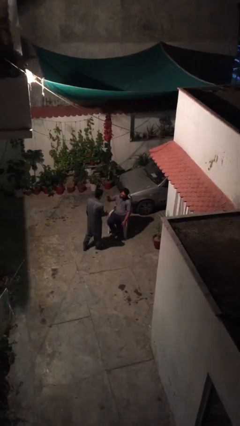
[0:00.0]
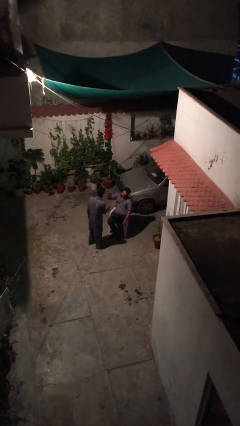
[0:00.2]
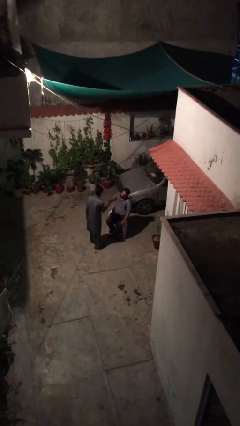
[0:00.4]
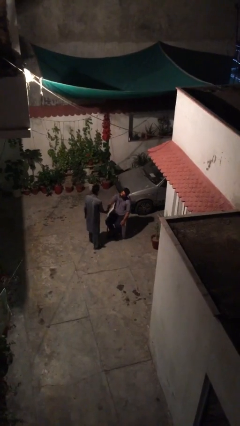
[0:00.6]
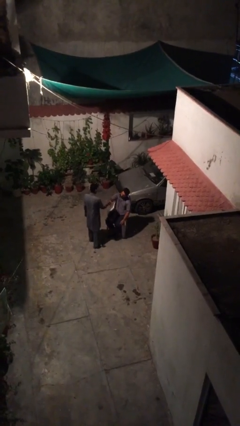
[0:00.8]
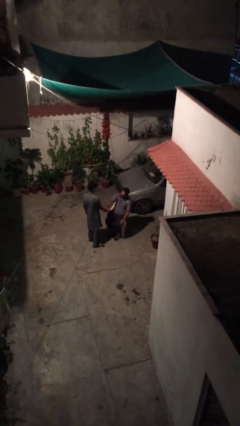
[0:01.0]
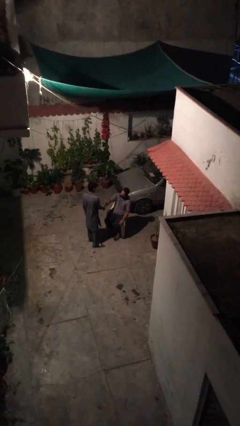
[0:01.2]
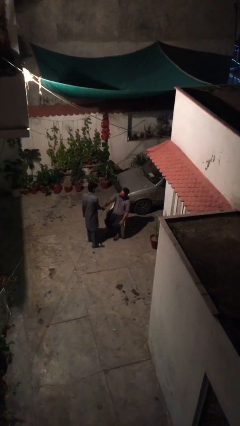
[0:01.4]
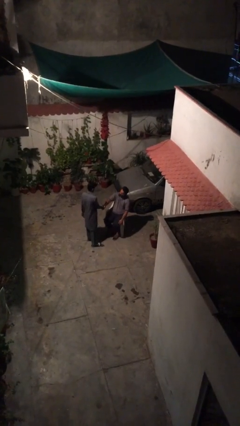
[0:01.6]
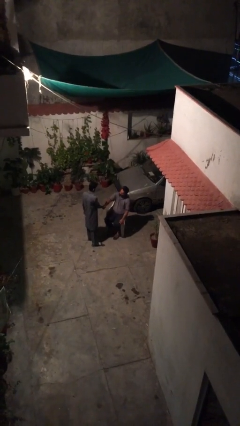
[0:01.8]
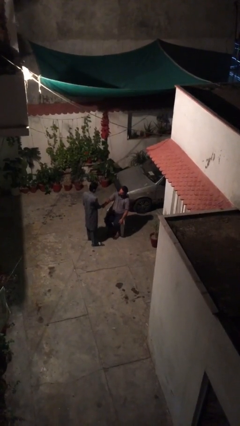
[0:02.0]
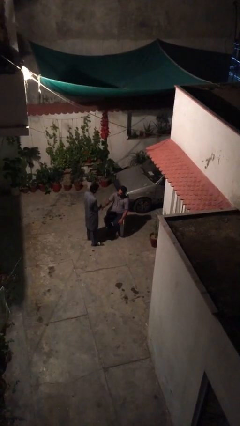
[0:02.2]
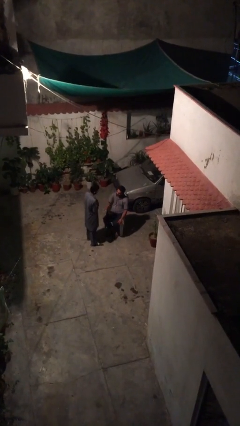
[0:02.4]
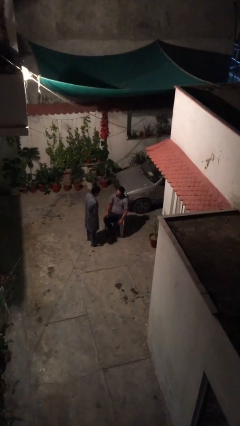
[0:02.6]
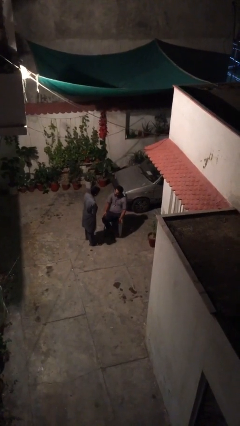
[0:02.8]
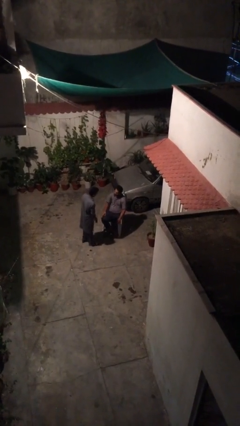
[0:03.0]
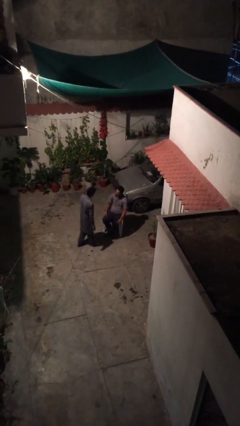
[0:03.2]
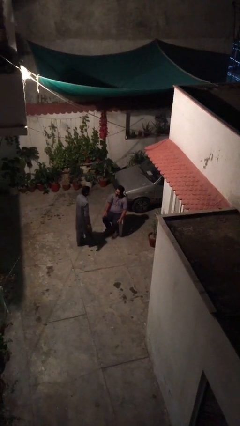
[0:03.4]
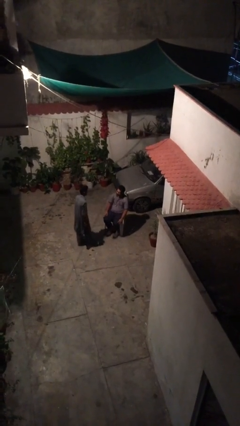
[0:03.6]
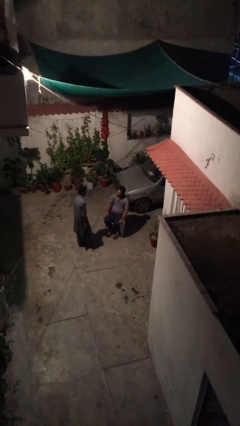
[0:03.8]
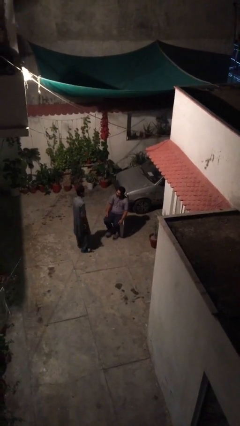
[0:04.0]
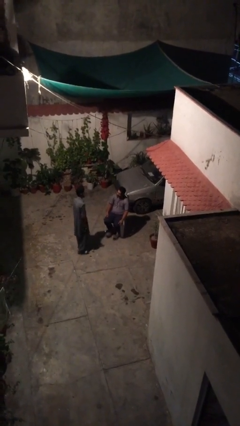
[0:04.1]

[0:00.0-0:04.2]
person shakes hand

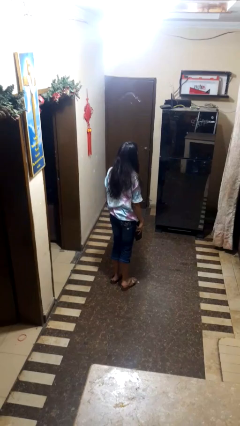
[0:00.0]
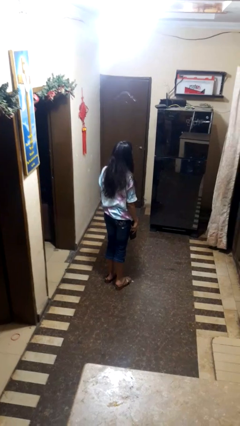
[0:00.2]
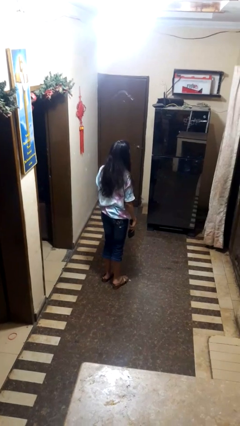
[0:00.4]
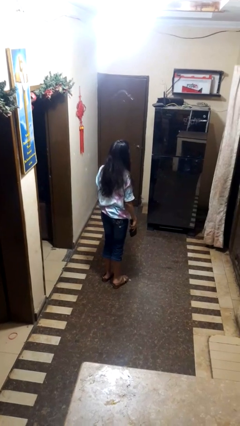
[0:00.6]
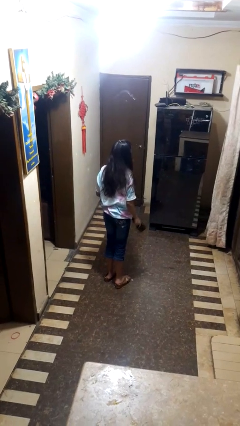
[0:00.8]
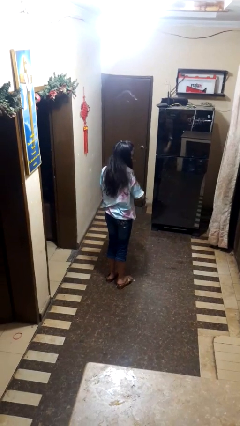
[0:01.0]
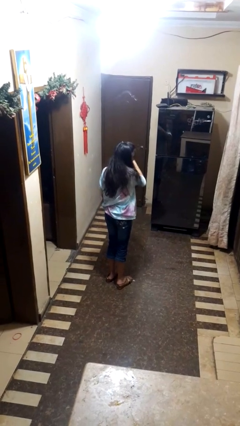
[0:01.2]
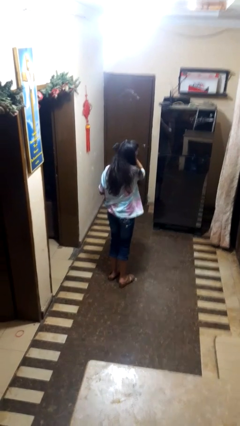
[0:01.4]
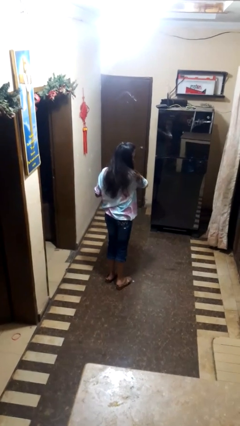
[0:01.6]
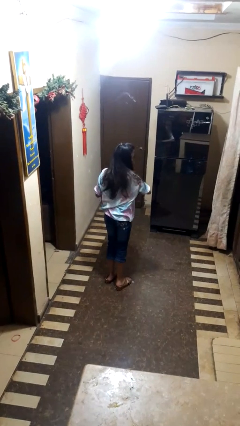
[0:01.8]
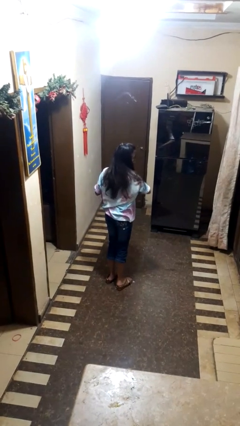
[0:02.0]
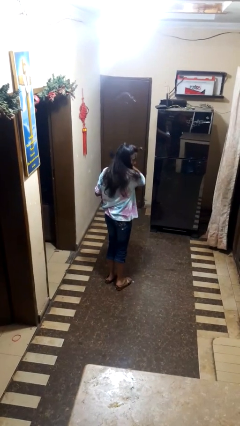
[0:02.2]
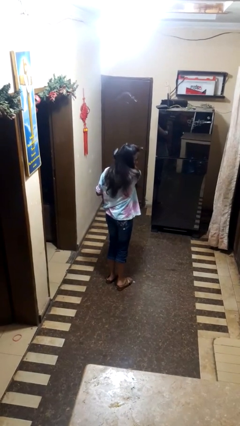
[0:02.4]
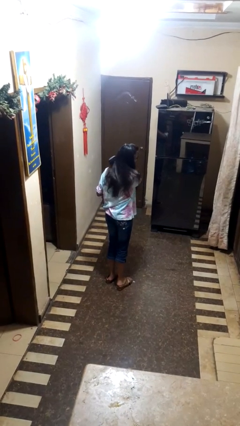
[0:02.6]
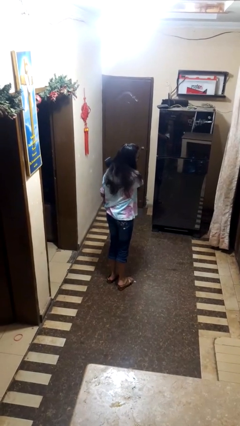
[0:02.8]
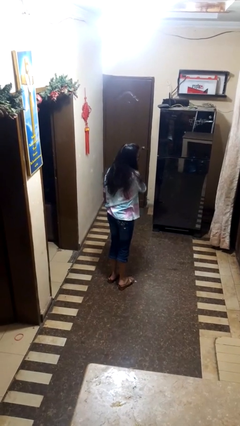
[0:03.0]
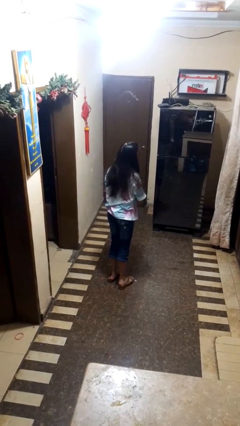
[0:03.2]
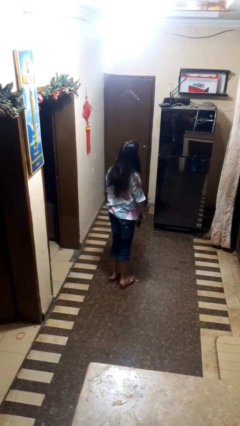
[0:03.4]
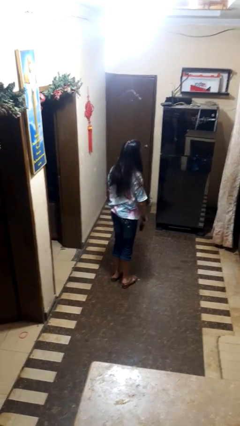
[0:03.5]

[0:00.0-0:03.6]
person brushes hair

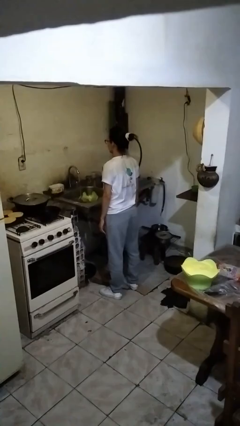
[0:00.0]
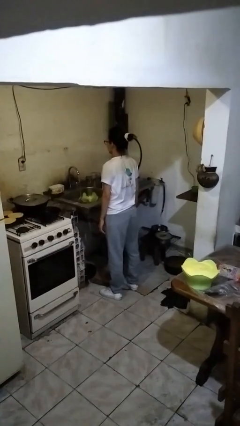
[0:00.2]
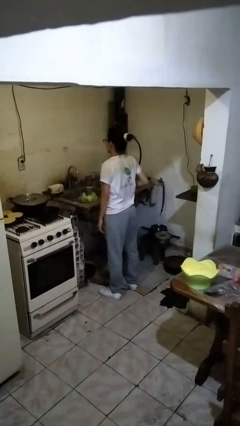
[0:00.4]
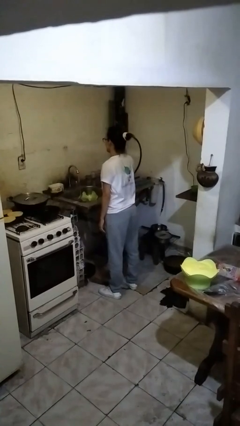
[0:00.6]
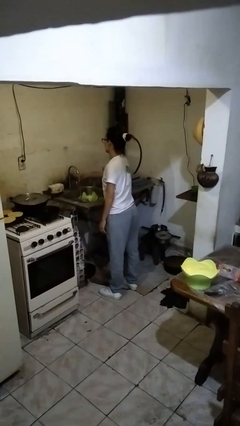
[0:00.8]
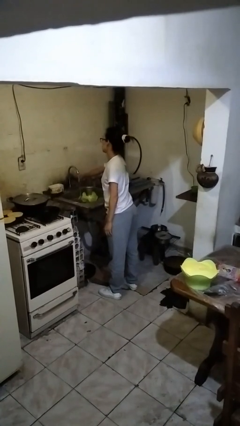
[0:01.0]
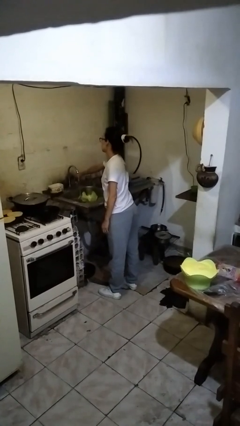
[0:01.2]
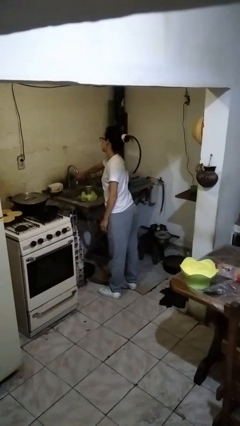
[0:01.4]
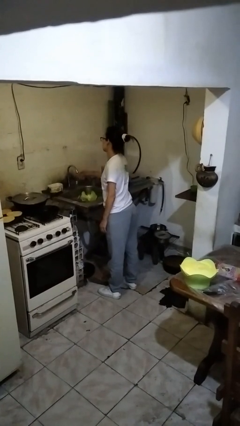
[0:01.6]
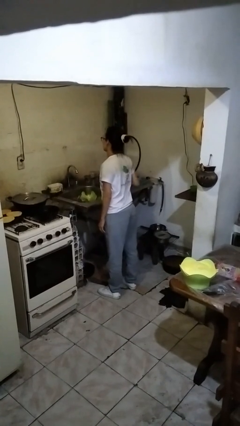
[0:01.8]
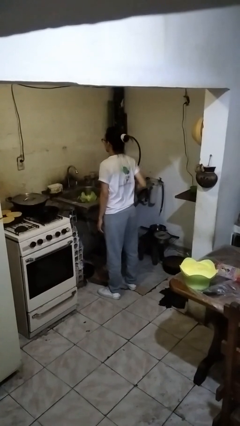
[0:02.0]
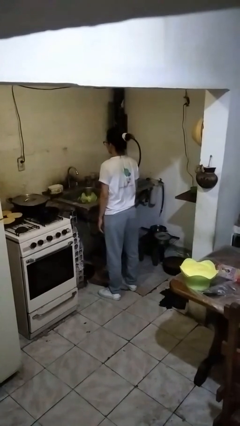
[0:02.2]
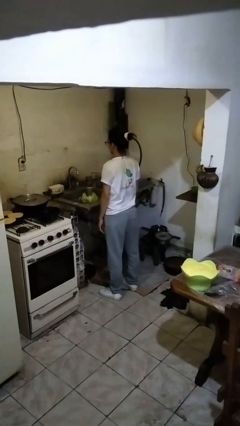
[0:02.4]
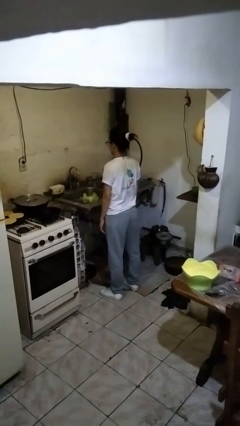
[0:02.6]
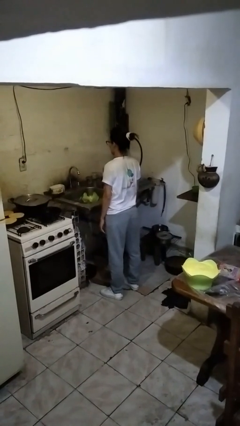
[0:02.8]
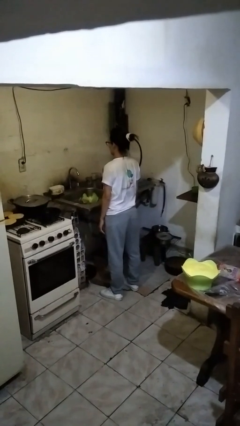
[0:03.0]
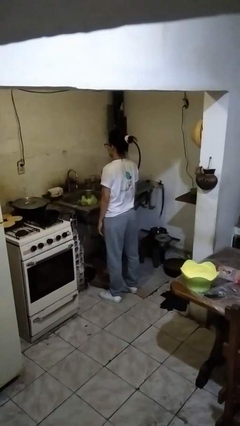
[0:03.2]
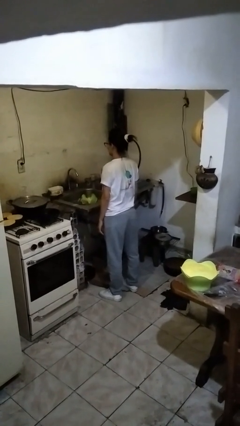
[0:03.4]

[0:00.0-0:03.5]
person turns off faucet

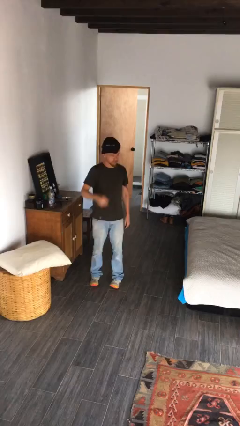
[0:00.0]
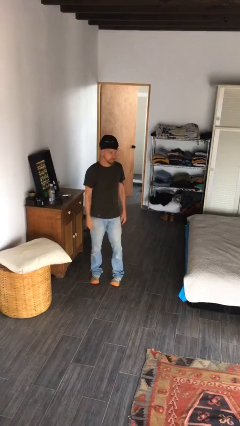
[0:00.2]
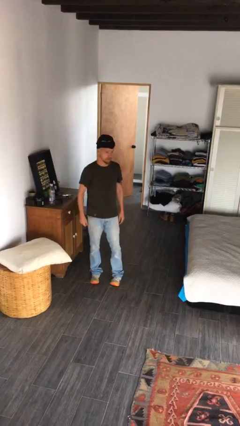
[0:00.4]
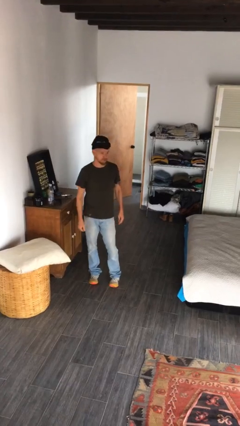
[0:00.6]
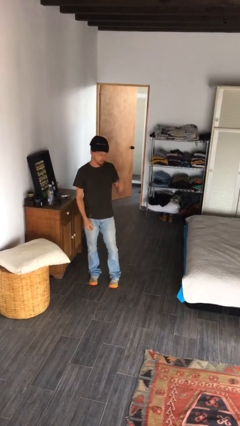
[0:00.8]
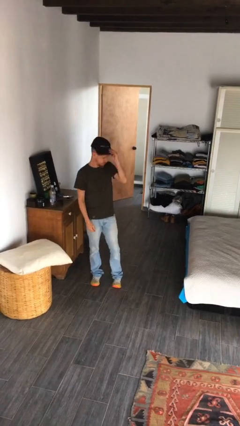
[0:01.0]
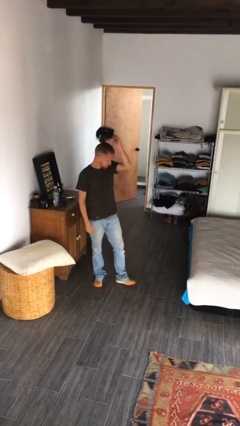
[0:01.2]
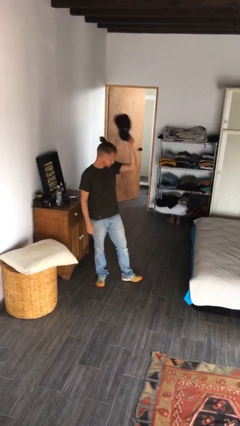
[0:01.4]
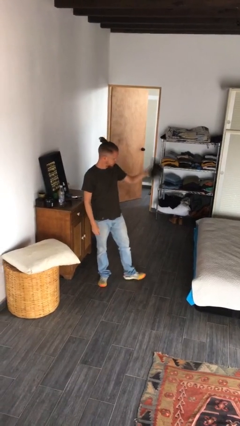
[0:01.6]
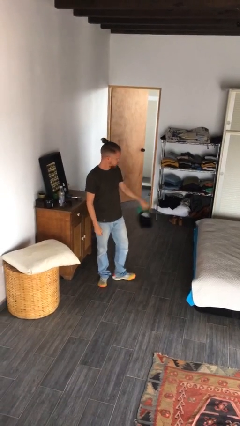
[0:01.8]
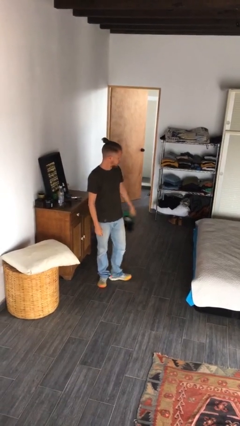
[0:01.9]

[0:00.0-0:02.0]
person takes off hat

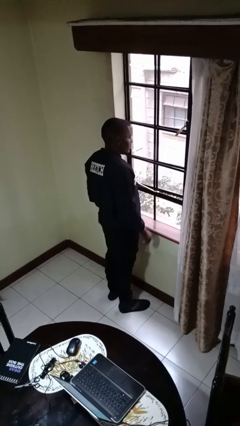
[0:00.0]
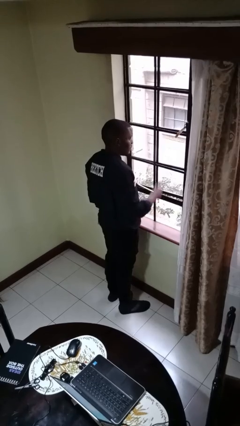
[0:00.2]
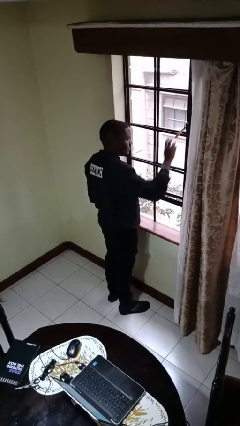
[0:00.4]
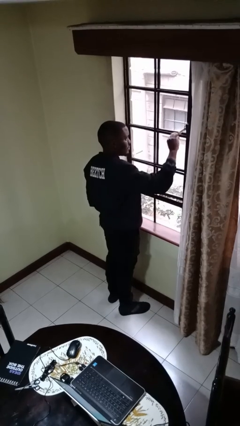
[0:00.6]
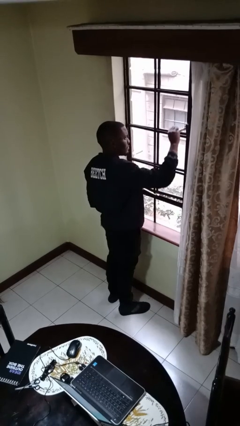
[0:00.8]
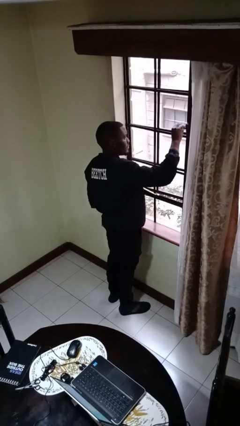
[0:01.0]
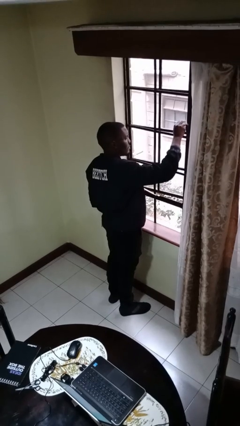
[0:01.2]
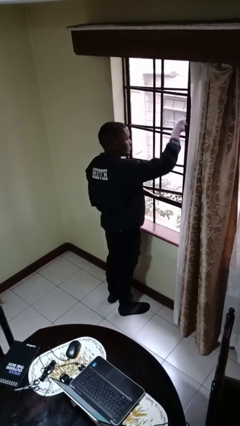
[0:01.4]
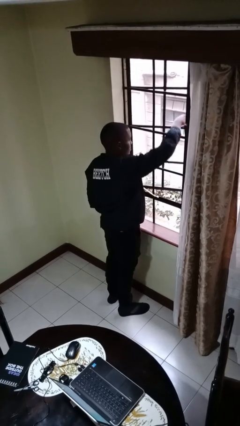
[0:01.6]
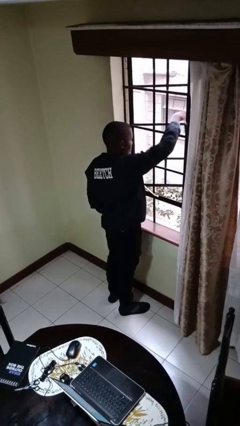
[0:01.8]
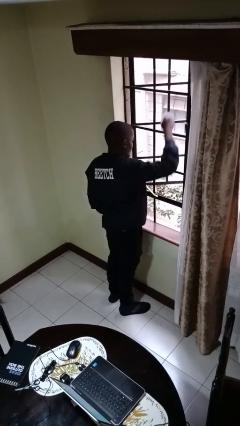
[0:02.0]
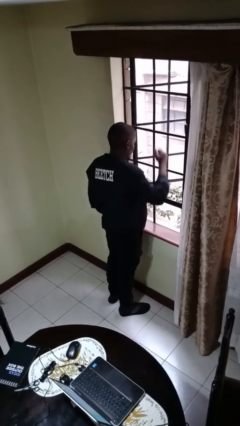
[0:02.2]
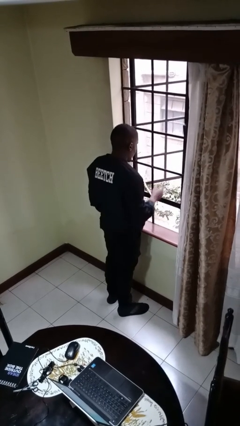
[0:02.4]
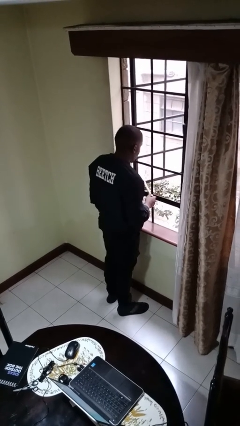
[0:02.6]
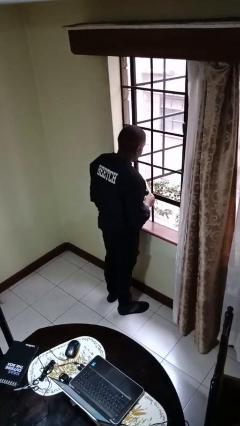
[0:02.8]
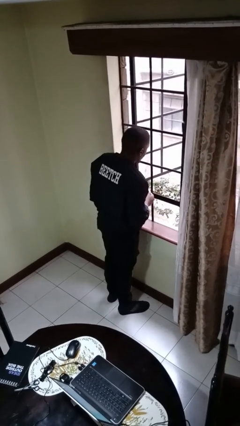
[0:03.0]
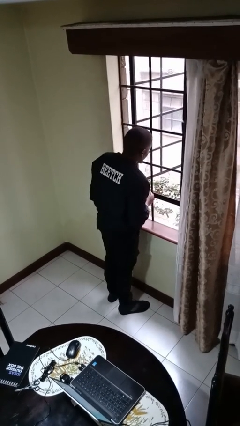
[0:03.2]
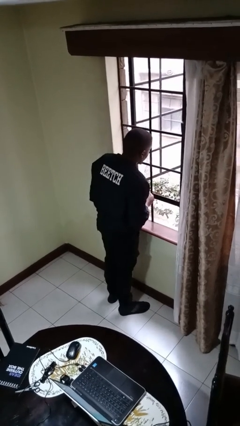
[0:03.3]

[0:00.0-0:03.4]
person opens home window

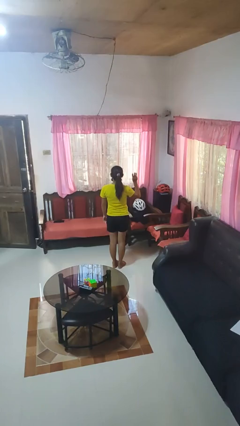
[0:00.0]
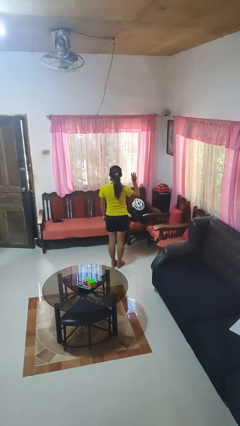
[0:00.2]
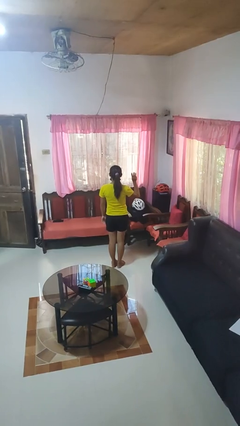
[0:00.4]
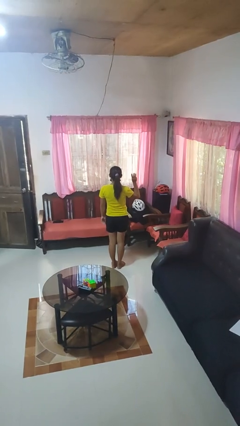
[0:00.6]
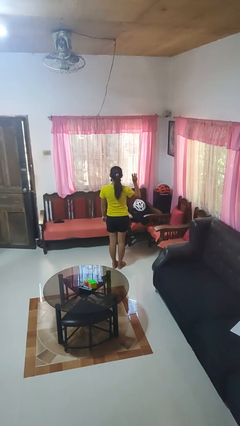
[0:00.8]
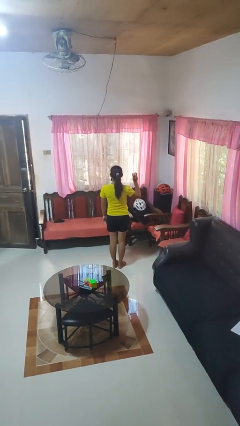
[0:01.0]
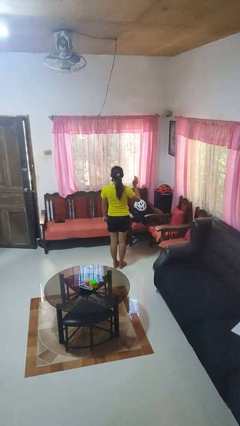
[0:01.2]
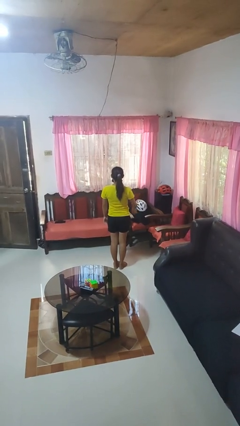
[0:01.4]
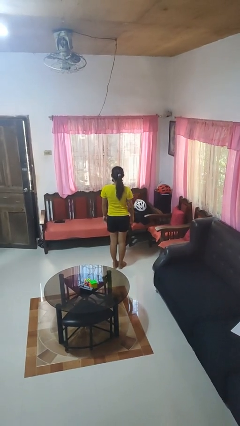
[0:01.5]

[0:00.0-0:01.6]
person gestures number three
